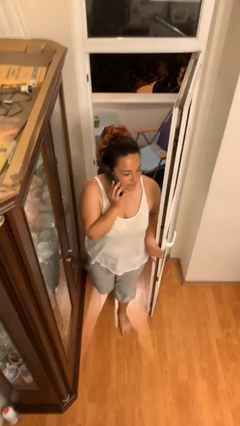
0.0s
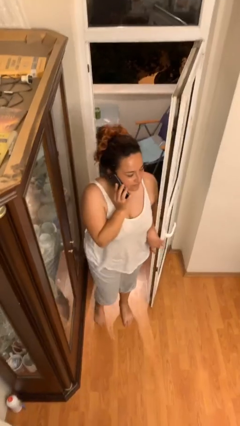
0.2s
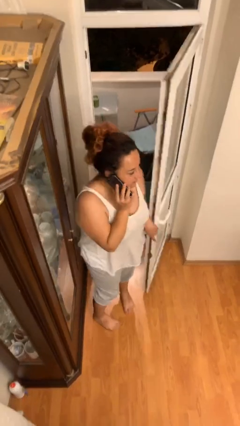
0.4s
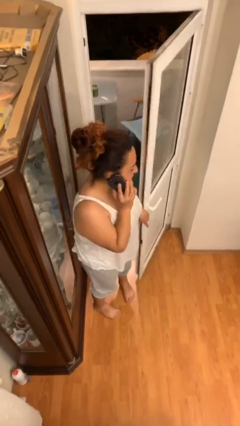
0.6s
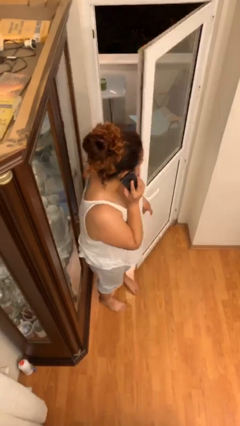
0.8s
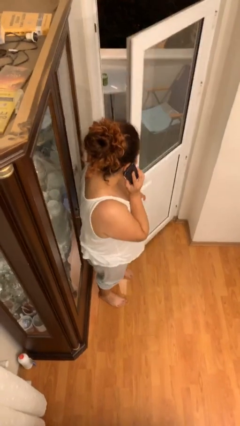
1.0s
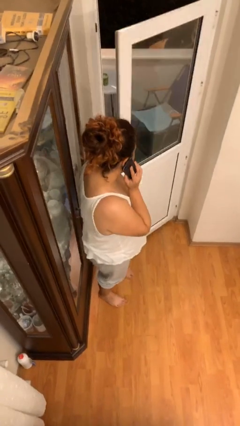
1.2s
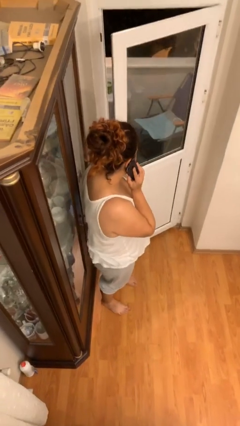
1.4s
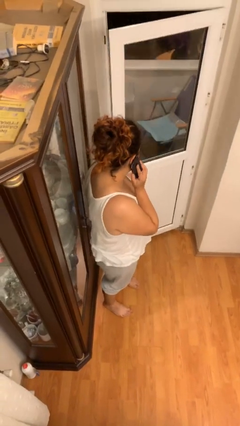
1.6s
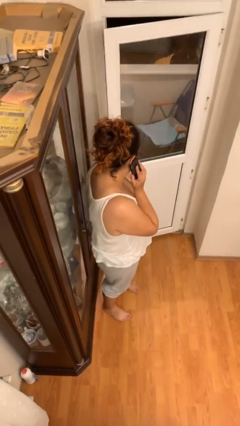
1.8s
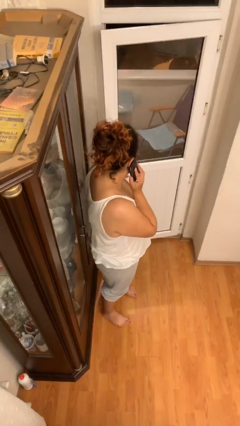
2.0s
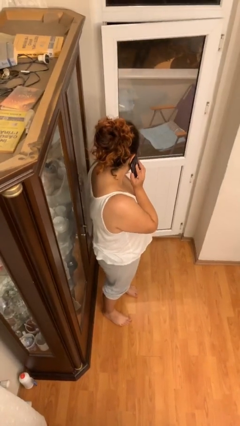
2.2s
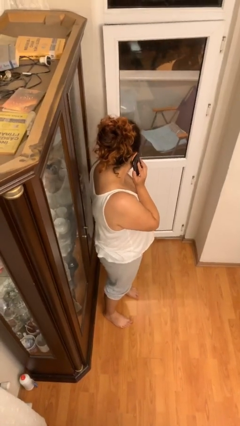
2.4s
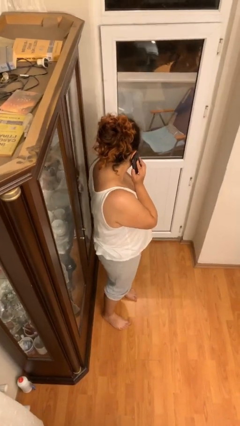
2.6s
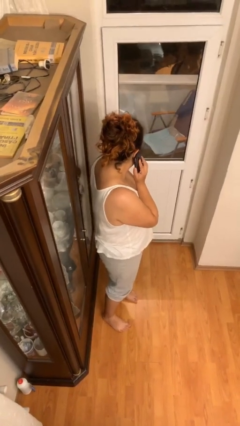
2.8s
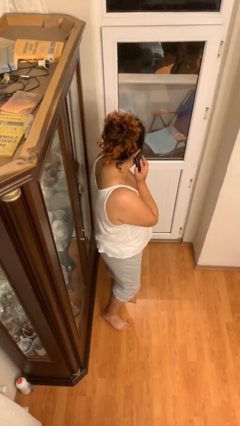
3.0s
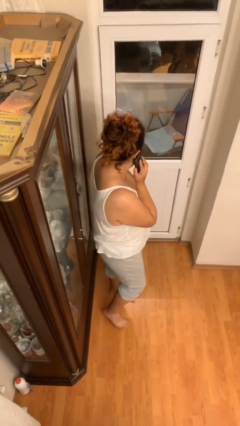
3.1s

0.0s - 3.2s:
person closes facility door

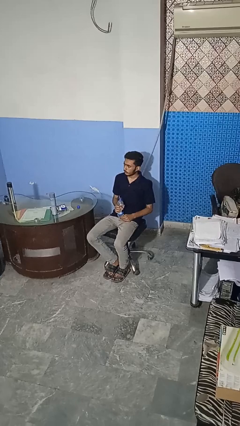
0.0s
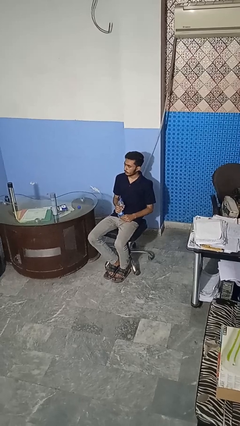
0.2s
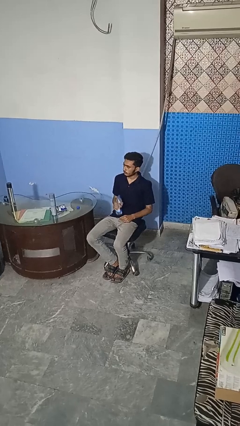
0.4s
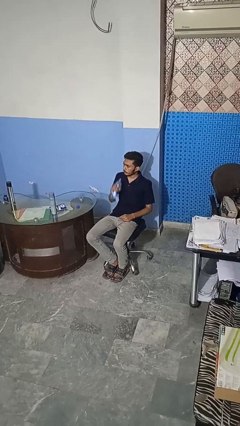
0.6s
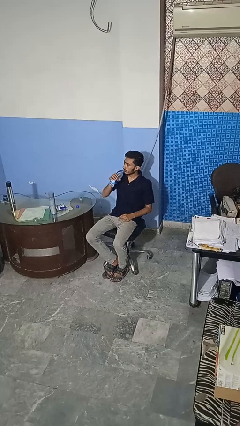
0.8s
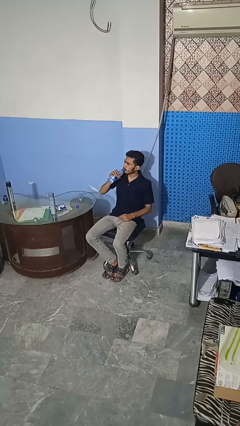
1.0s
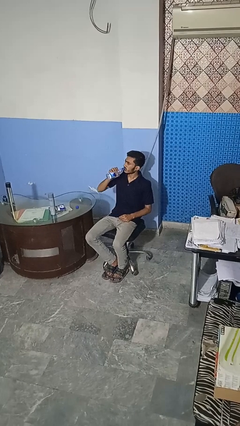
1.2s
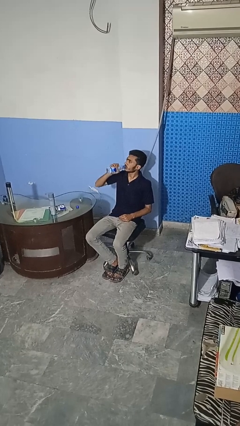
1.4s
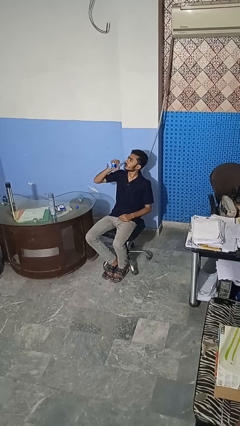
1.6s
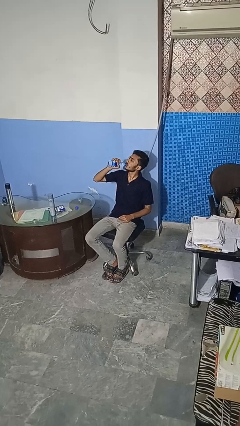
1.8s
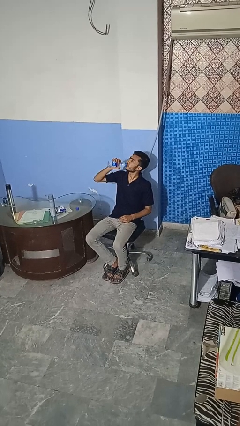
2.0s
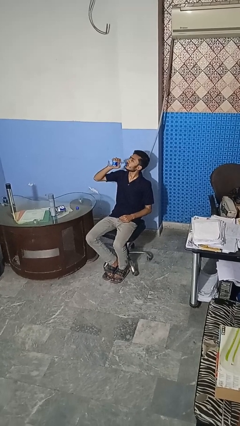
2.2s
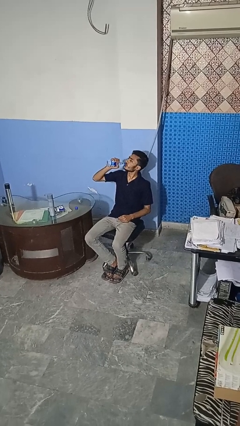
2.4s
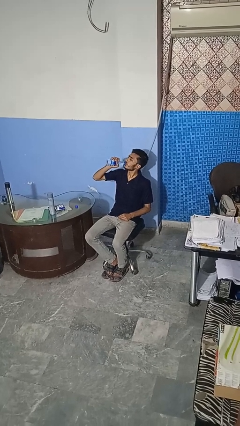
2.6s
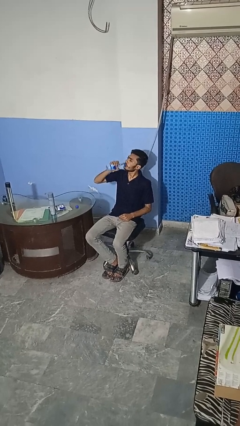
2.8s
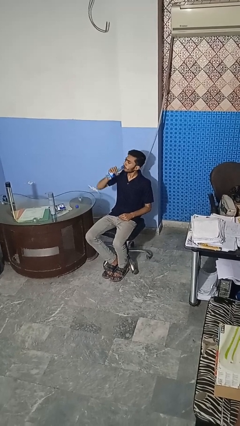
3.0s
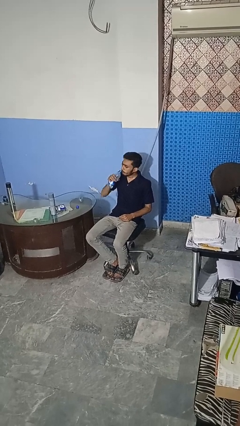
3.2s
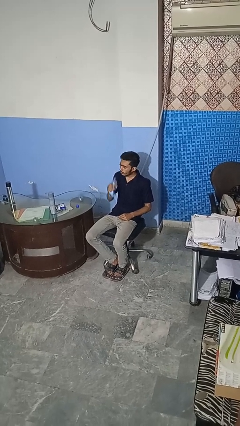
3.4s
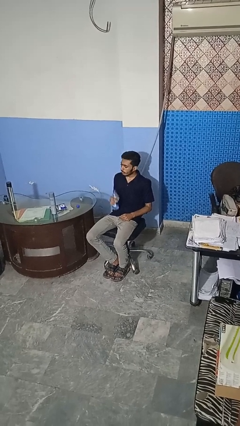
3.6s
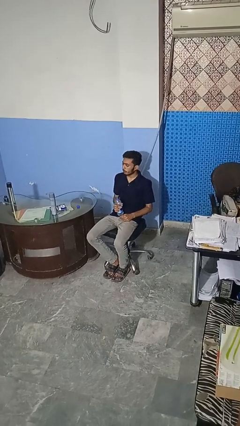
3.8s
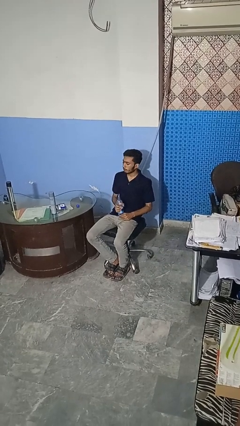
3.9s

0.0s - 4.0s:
person drinks from bottle

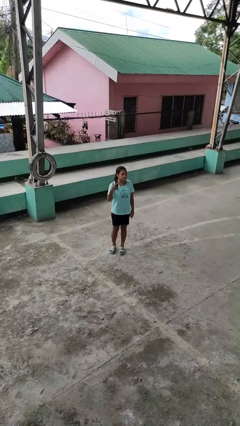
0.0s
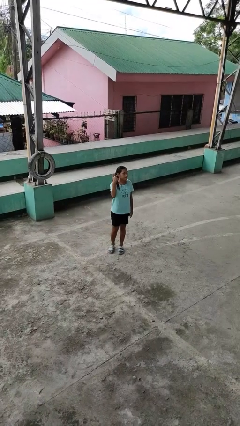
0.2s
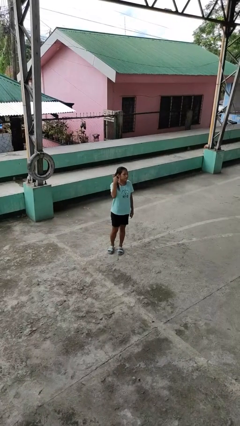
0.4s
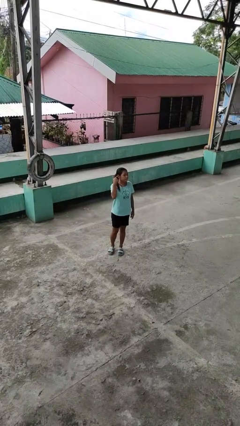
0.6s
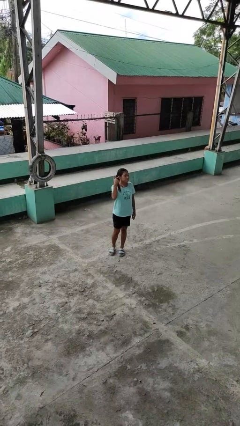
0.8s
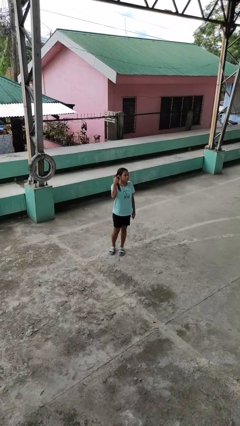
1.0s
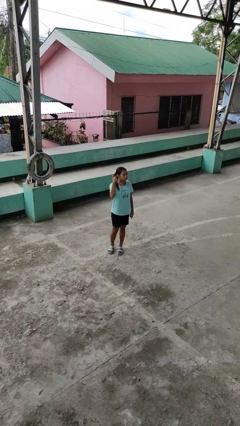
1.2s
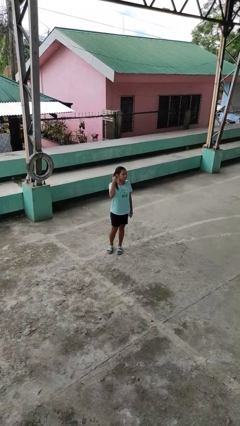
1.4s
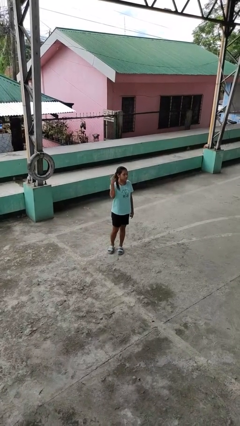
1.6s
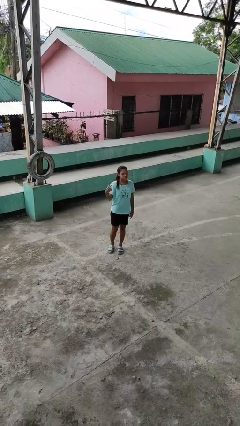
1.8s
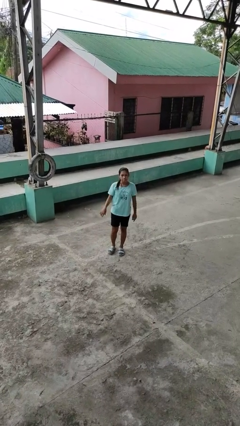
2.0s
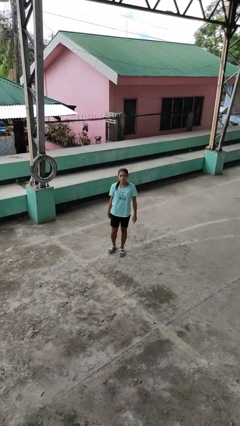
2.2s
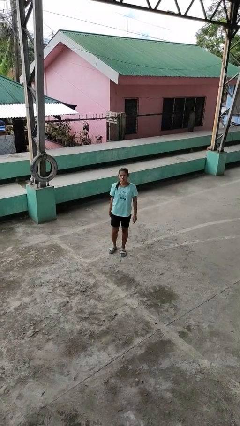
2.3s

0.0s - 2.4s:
person gestures listen closely

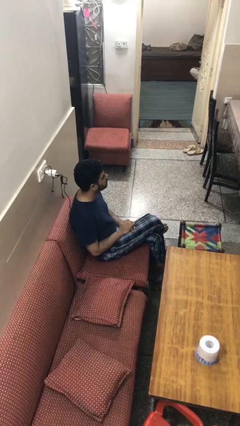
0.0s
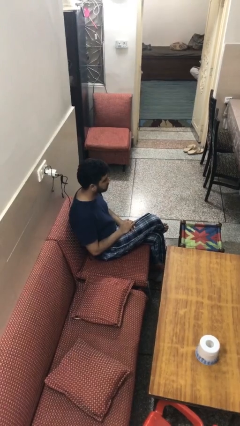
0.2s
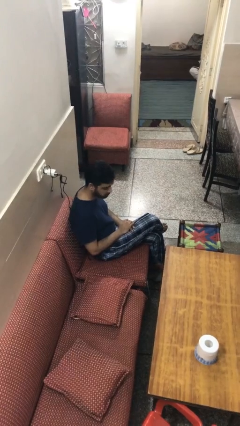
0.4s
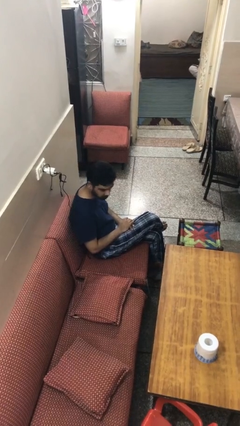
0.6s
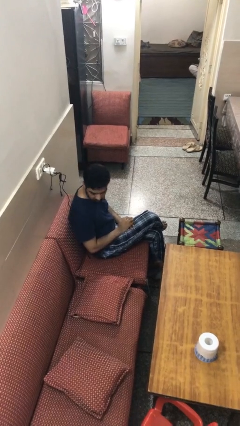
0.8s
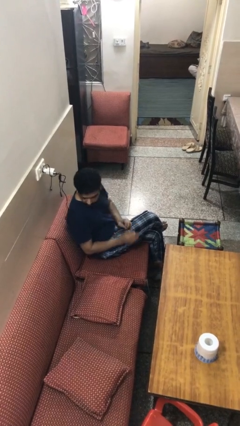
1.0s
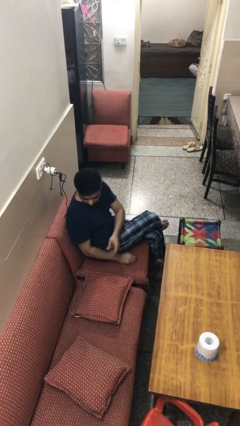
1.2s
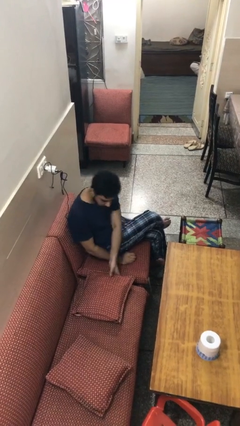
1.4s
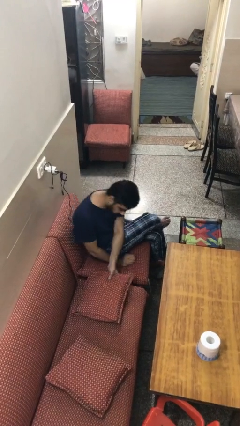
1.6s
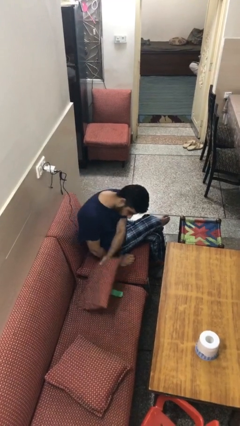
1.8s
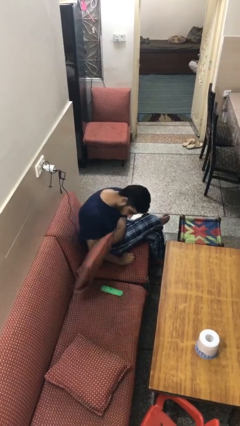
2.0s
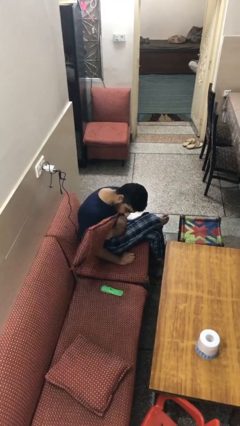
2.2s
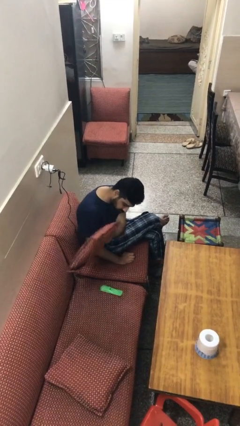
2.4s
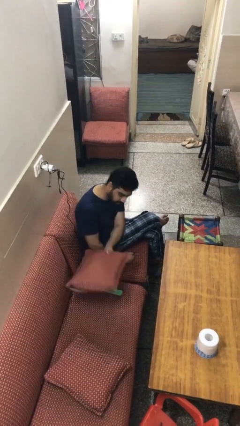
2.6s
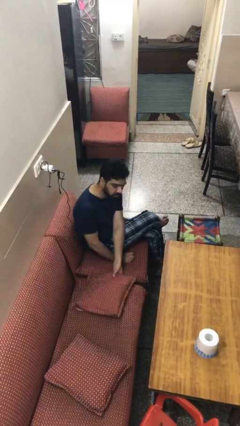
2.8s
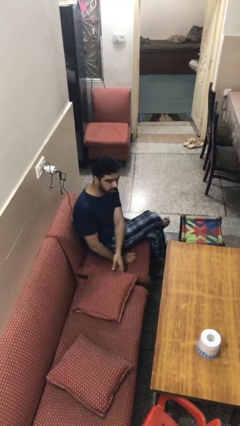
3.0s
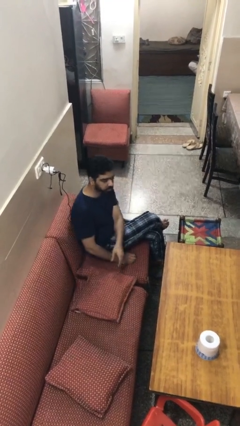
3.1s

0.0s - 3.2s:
person searches in couch

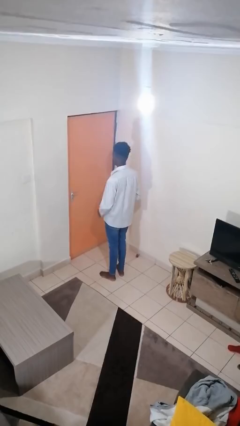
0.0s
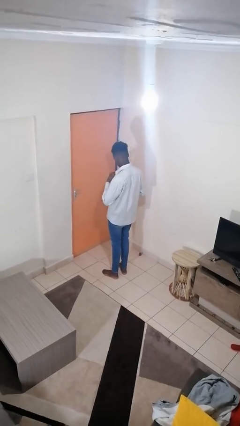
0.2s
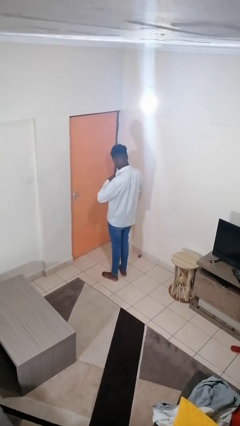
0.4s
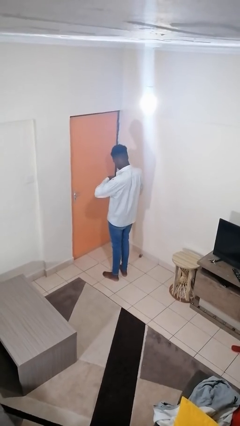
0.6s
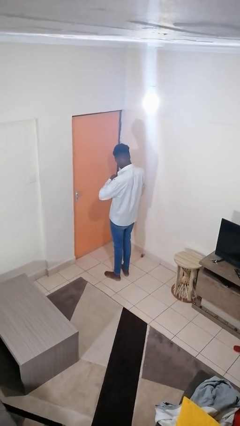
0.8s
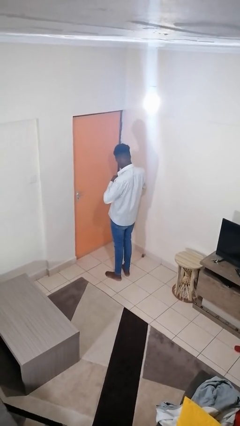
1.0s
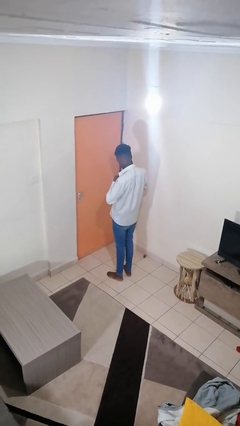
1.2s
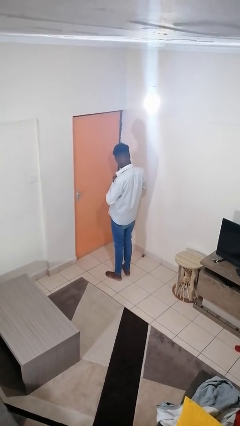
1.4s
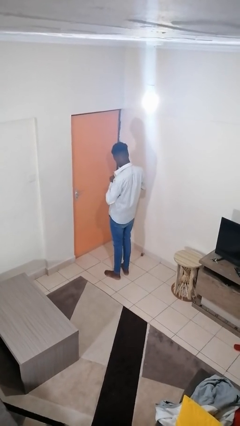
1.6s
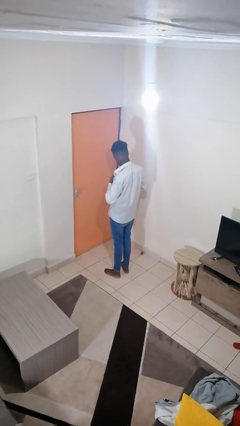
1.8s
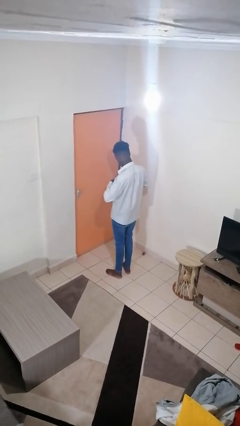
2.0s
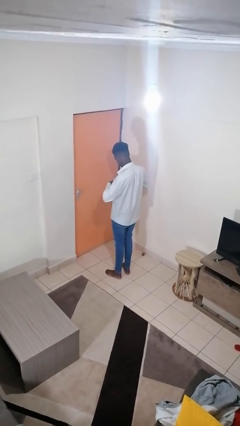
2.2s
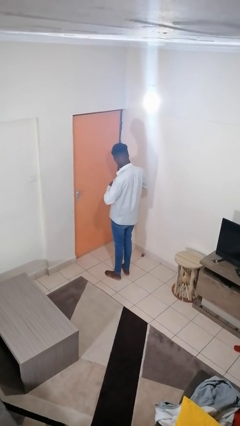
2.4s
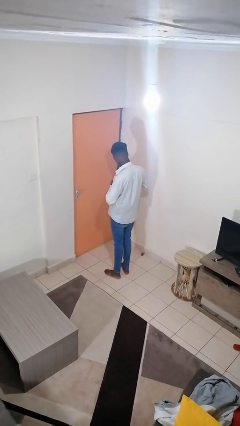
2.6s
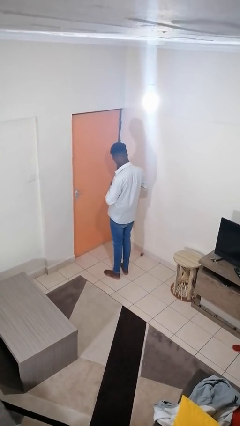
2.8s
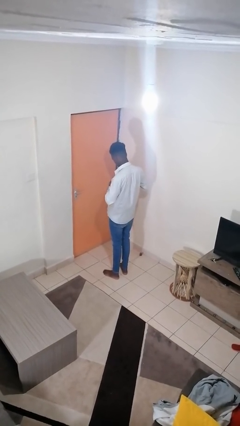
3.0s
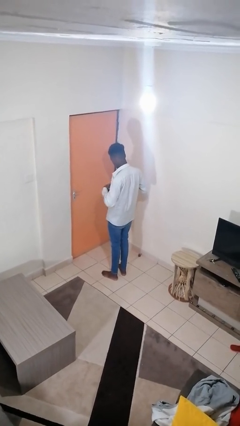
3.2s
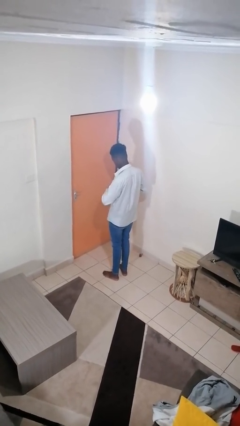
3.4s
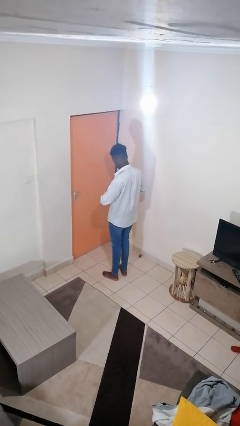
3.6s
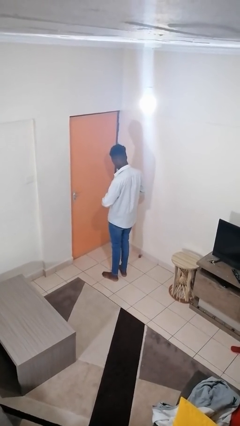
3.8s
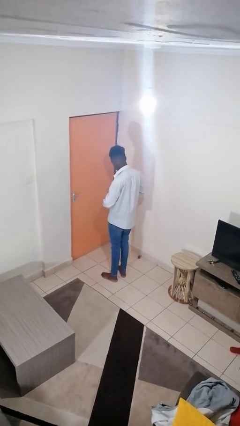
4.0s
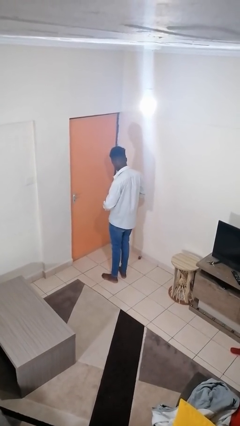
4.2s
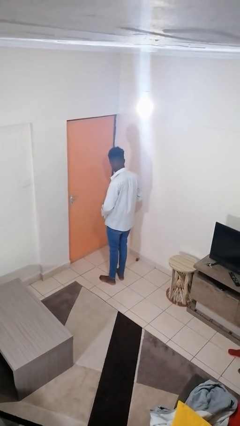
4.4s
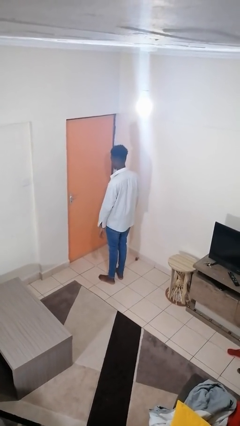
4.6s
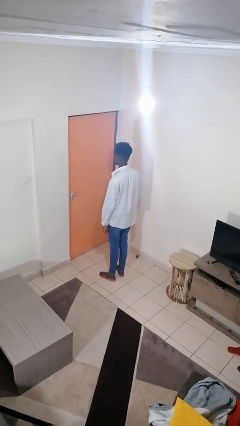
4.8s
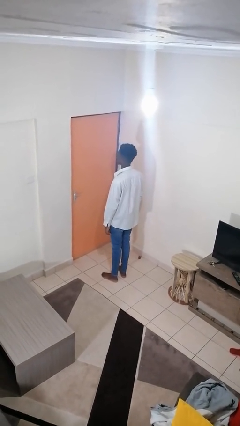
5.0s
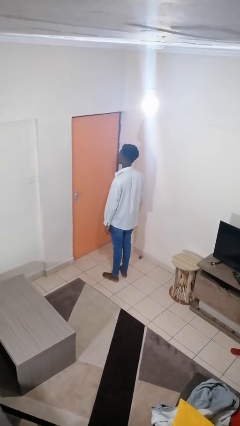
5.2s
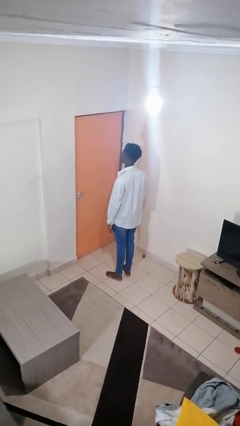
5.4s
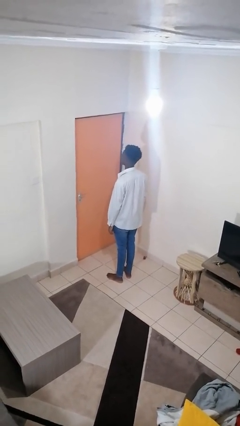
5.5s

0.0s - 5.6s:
person unbuttons shirt
